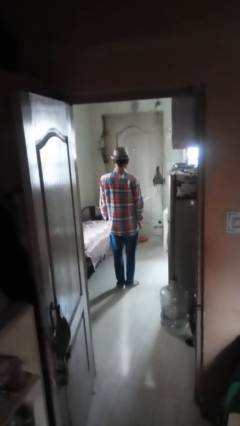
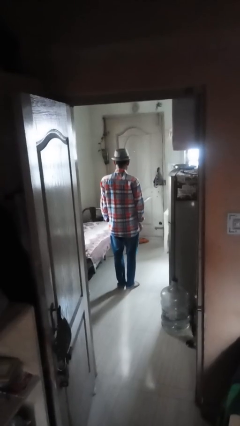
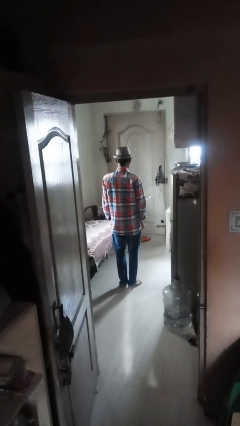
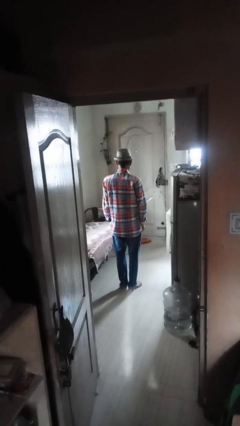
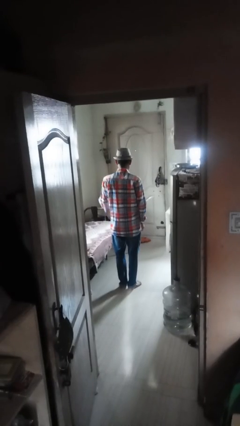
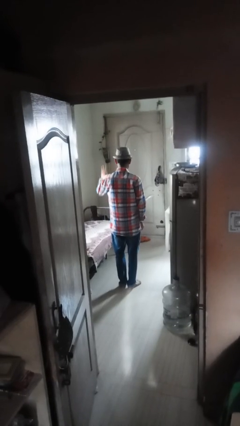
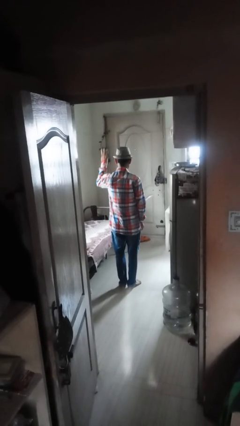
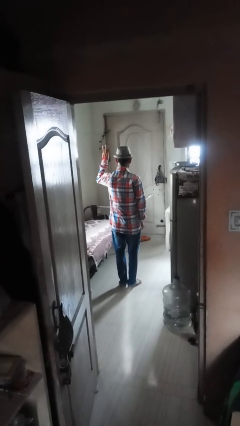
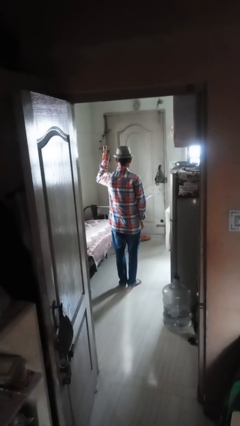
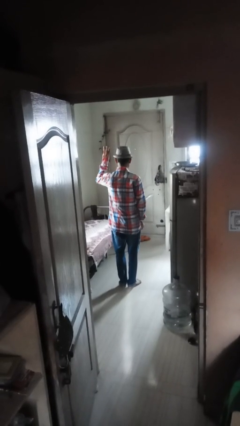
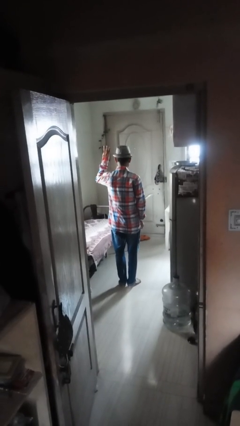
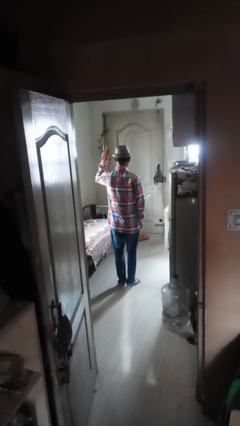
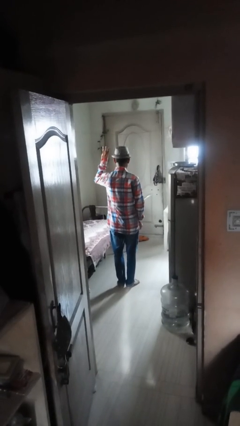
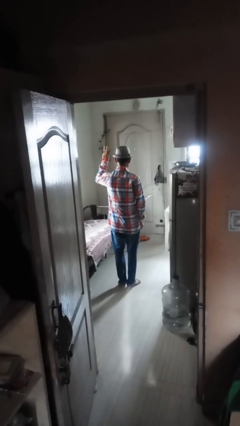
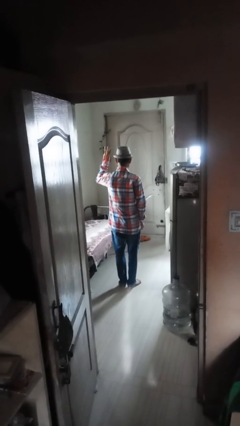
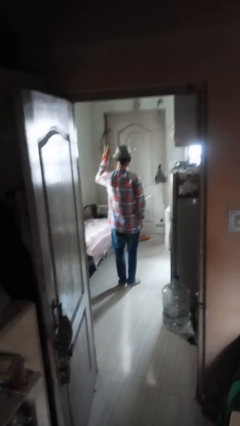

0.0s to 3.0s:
person gestures number three

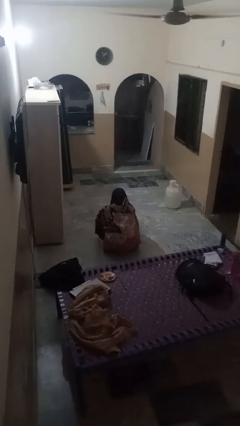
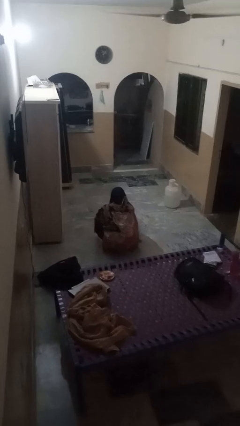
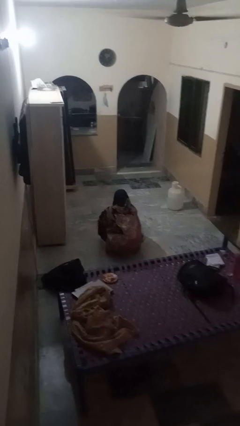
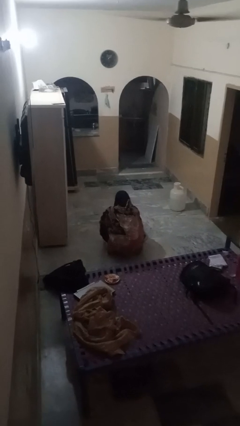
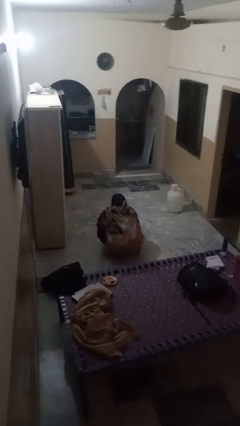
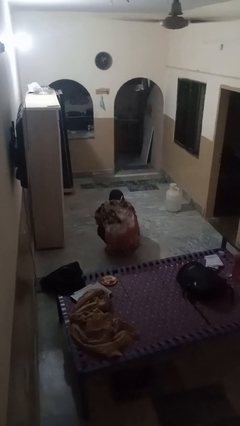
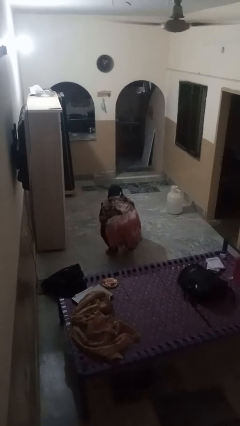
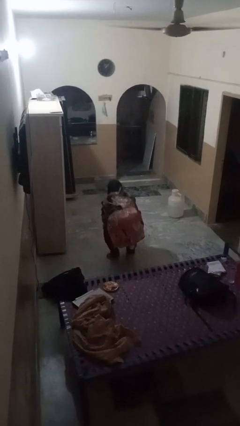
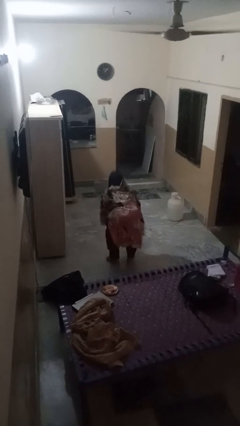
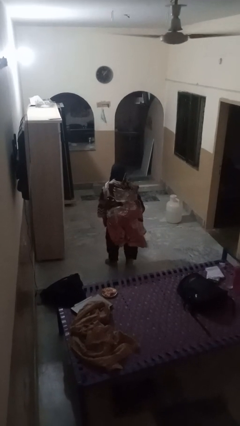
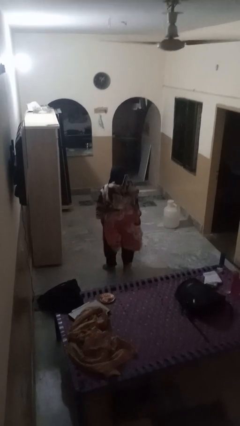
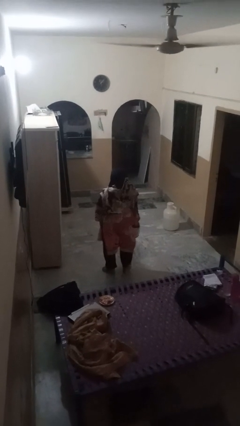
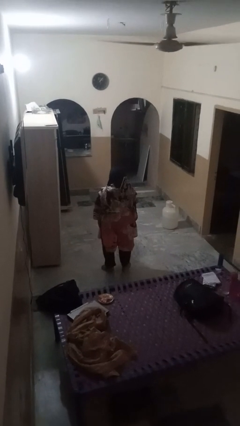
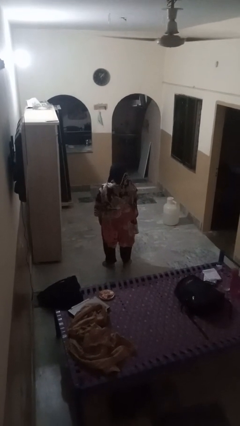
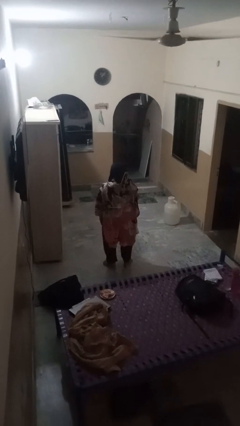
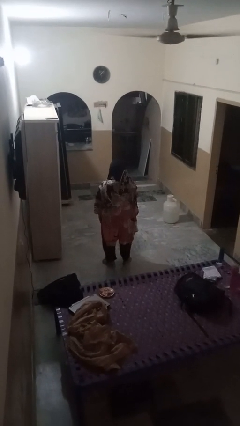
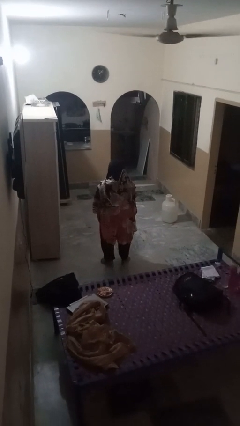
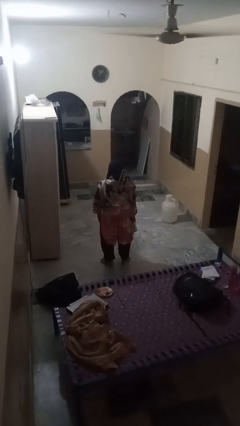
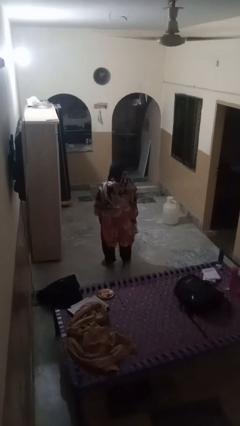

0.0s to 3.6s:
person stands up

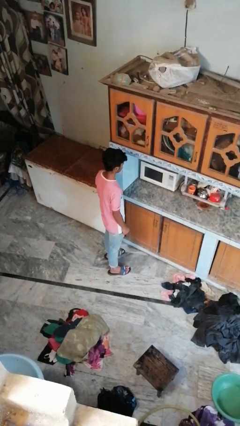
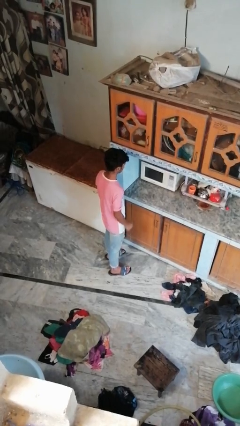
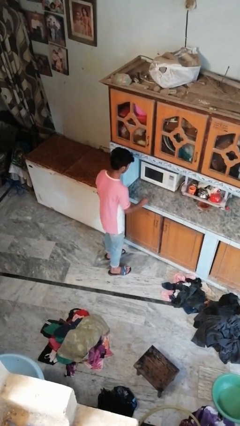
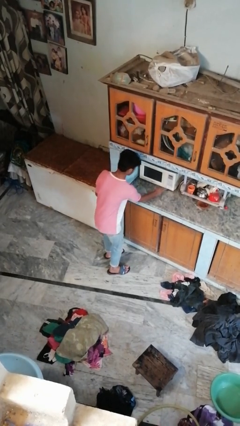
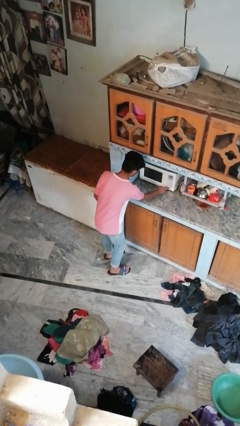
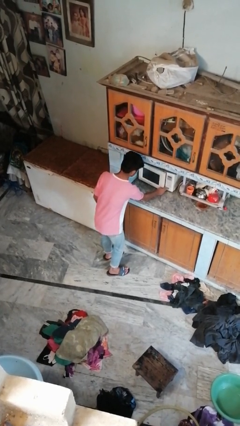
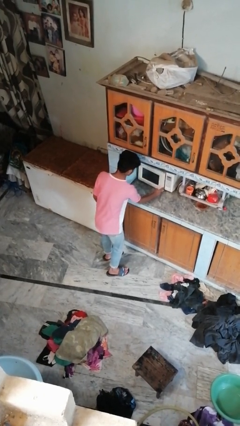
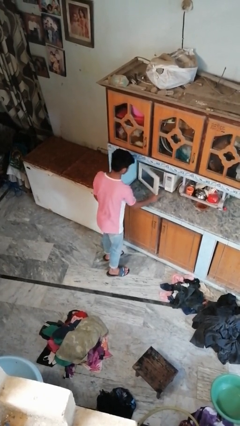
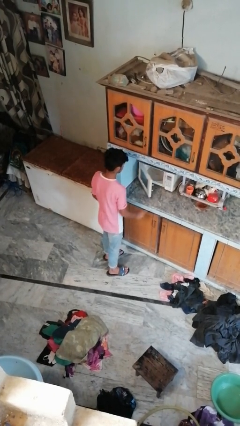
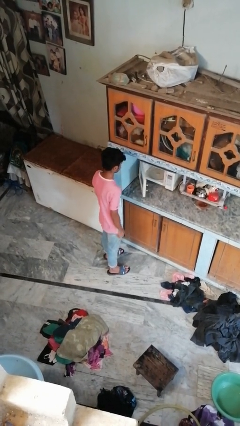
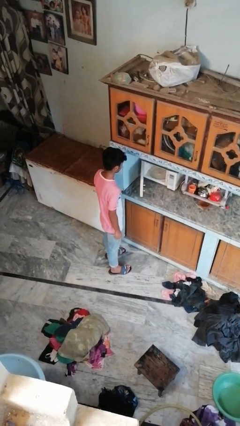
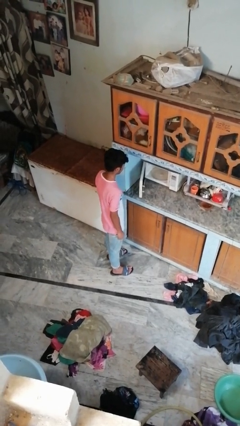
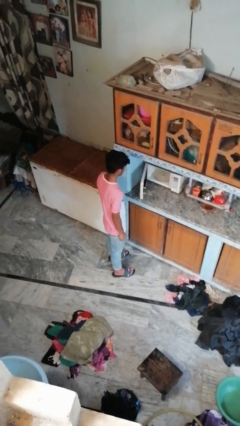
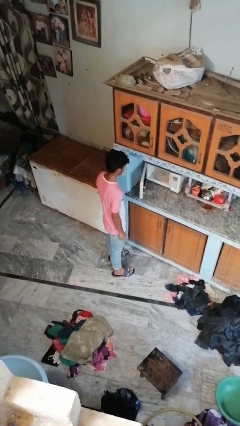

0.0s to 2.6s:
person opens oven door

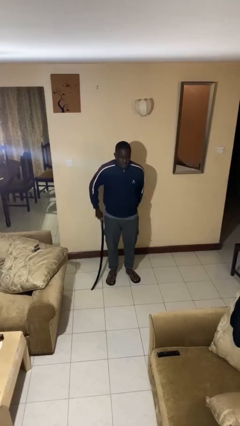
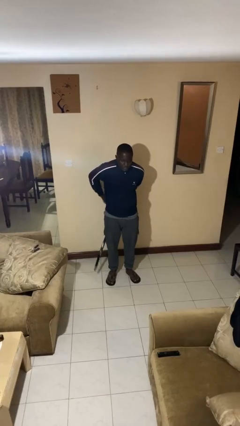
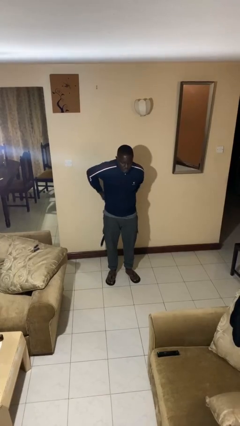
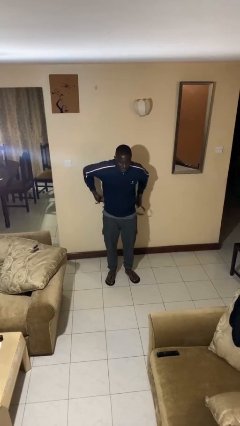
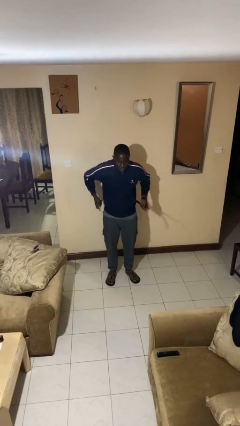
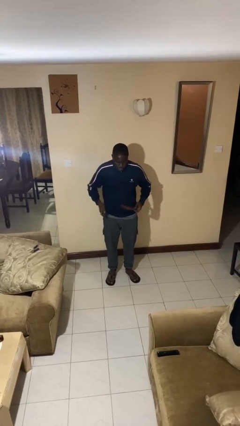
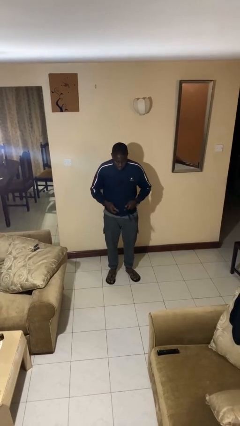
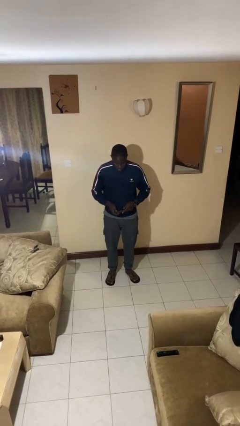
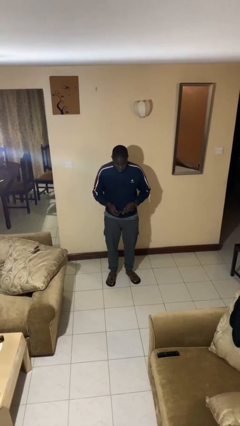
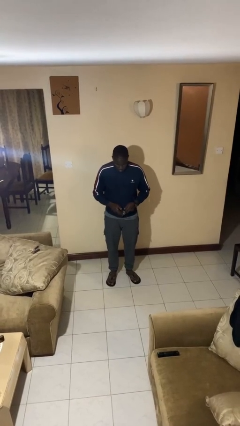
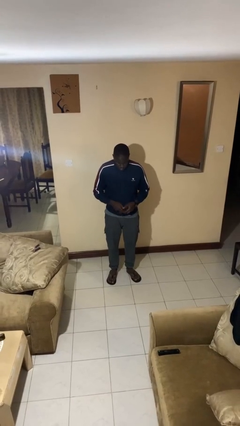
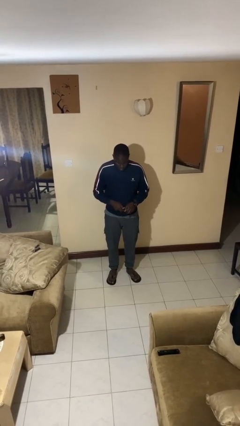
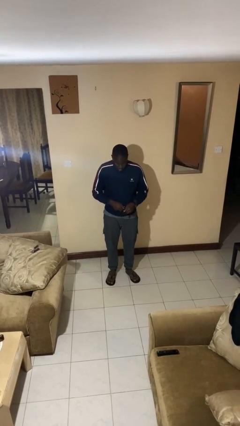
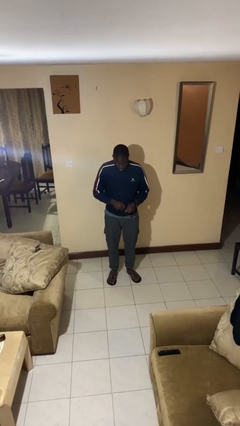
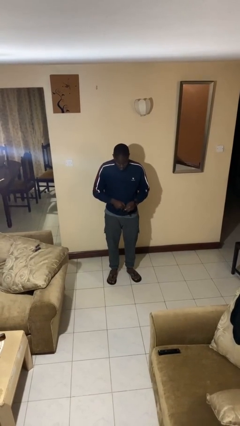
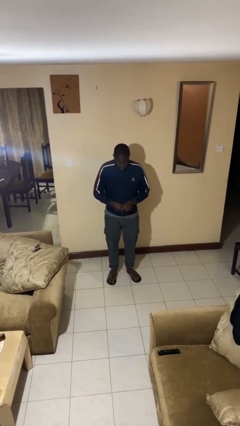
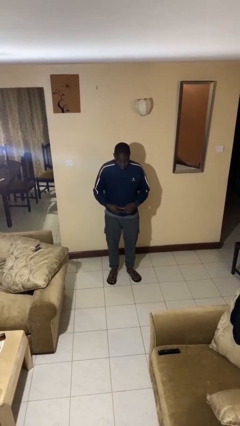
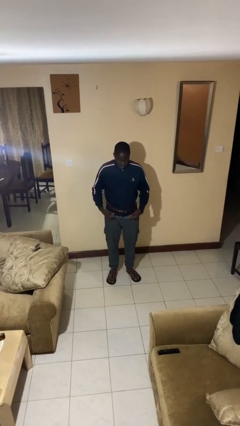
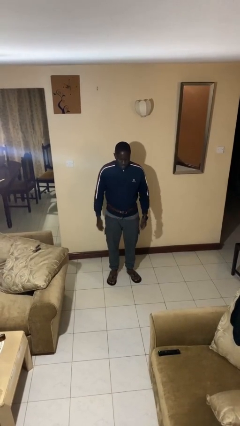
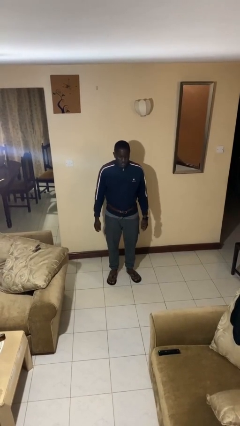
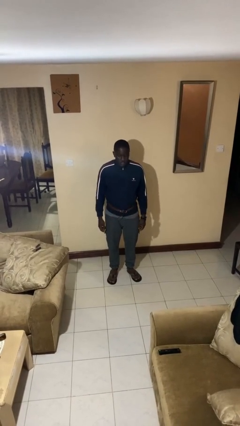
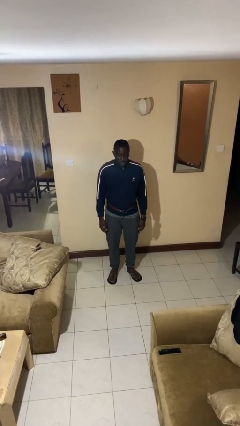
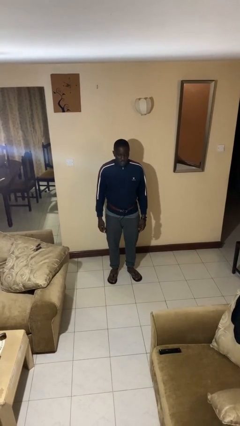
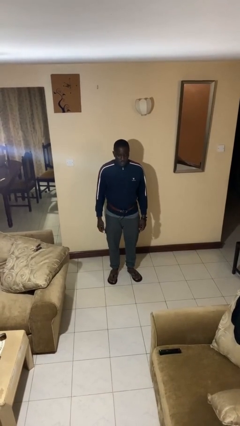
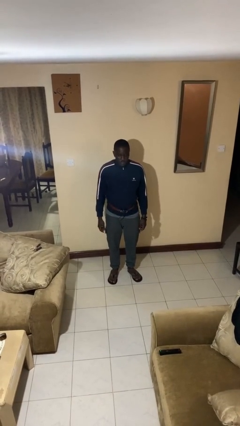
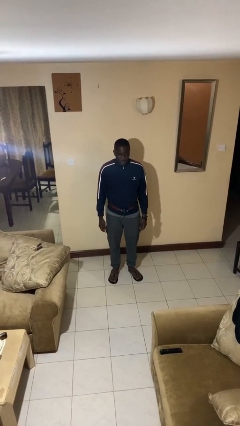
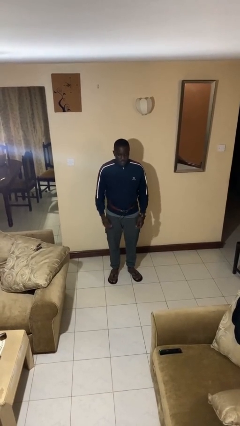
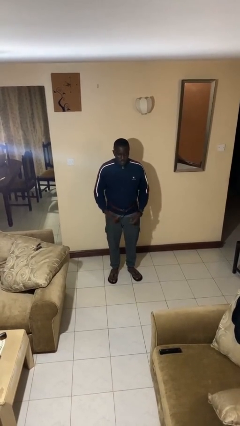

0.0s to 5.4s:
person puts on belt

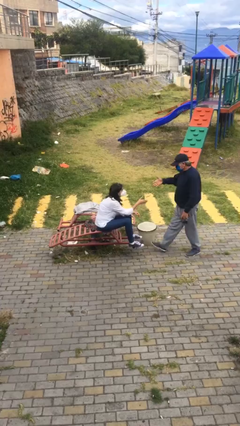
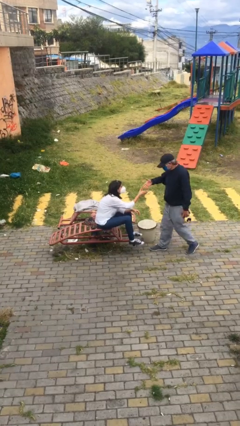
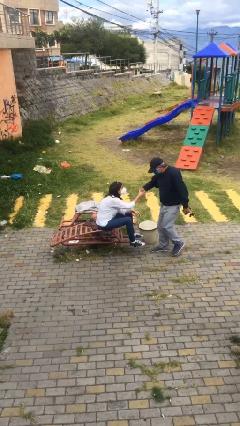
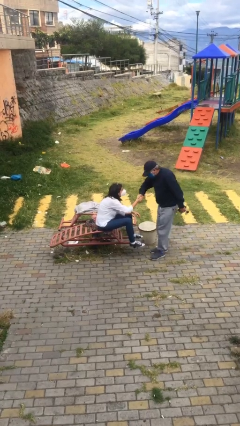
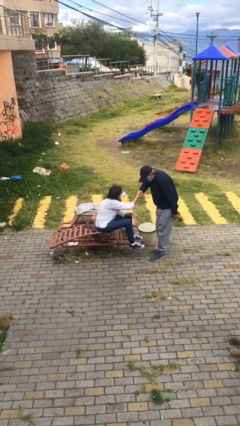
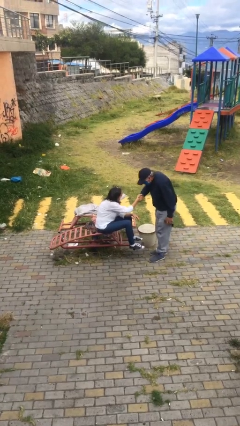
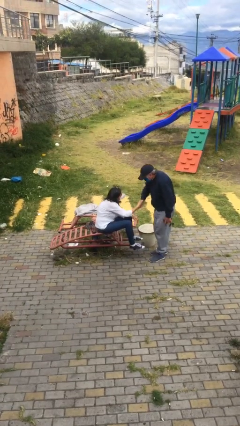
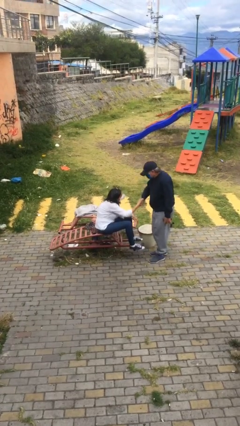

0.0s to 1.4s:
person shakes hand

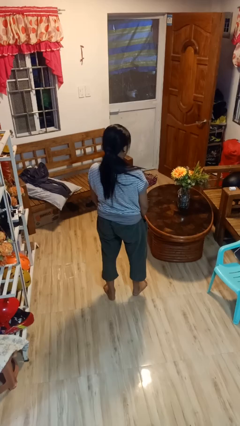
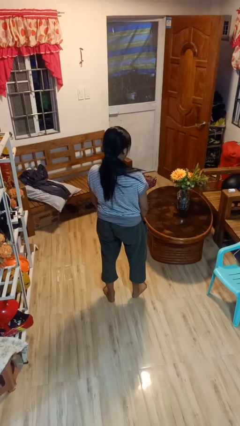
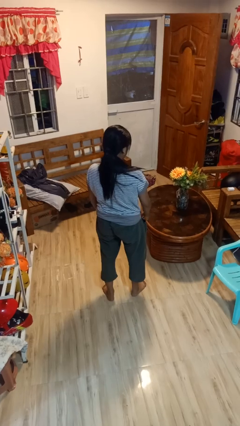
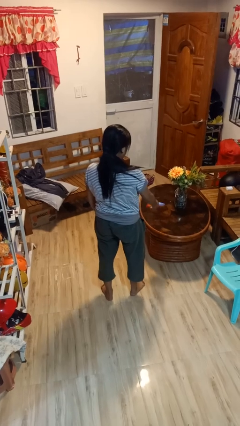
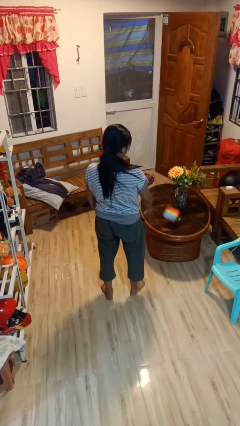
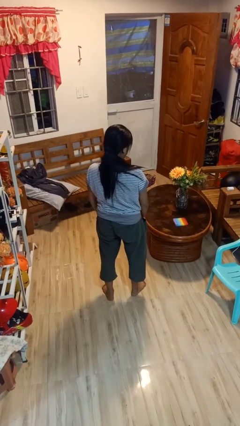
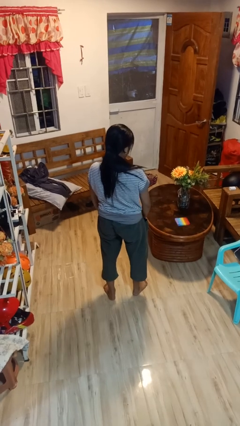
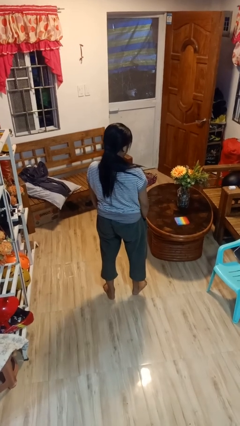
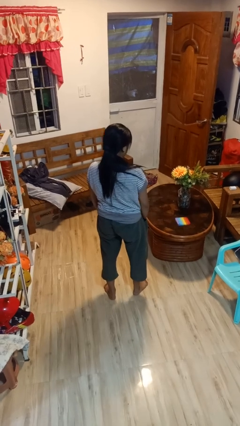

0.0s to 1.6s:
person throws object on table
